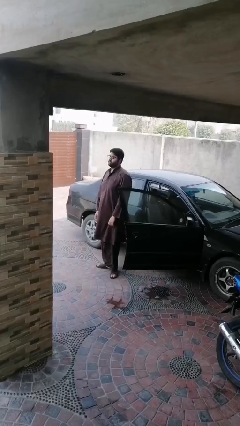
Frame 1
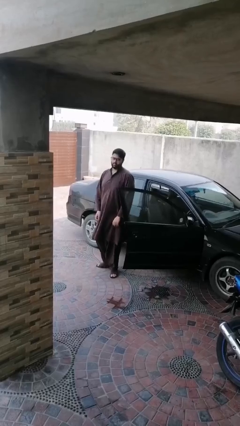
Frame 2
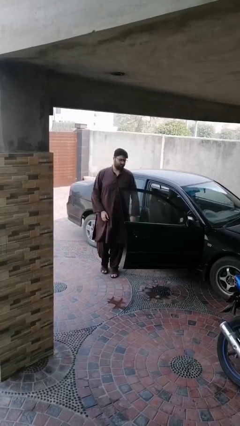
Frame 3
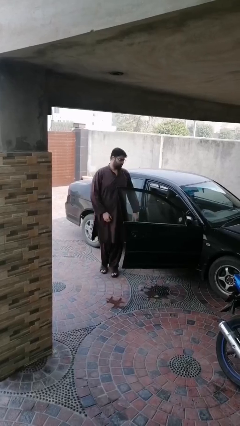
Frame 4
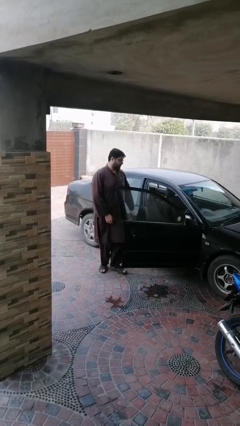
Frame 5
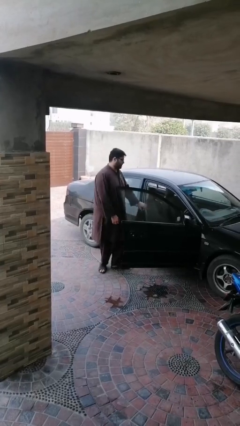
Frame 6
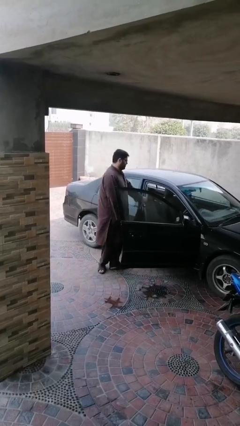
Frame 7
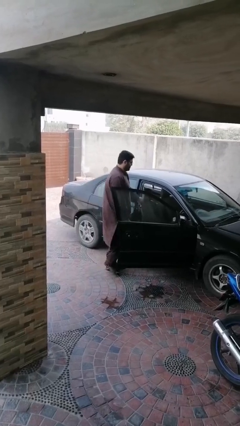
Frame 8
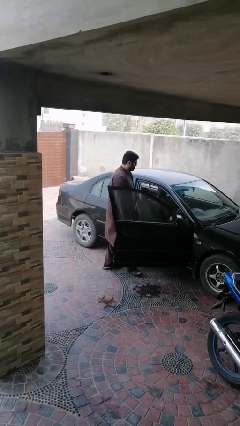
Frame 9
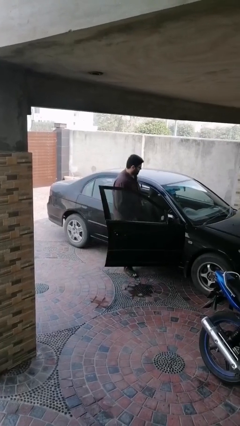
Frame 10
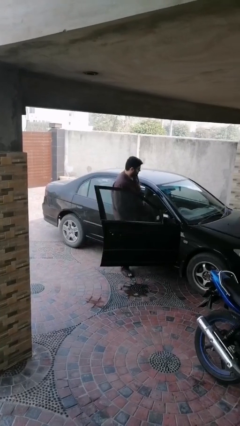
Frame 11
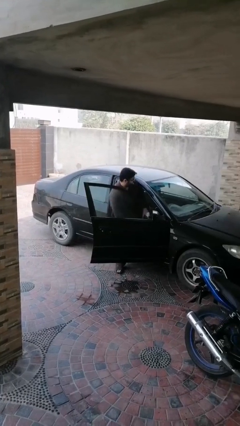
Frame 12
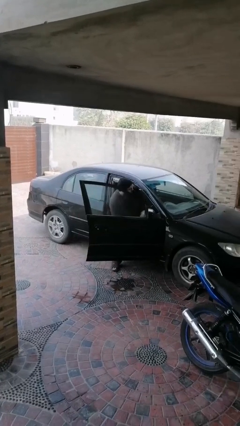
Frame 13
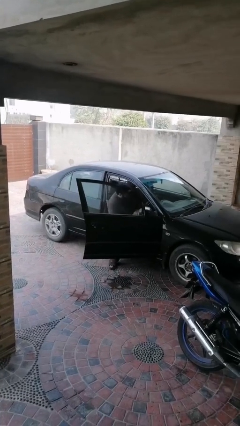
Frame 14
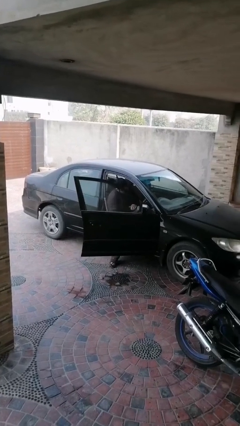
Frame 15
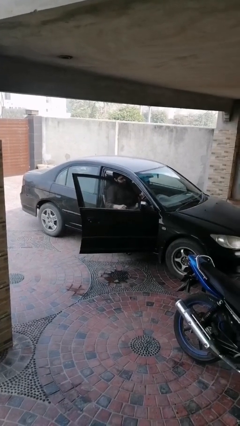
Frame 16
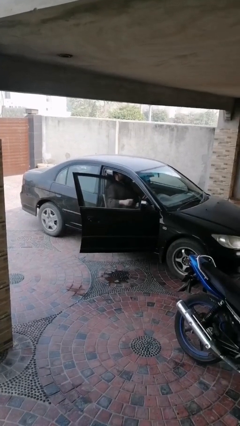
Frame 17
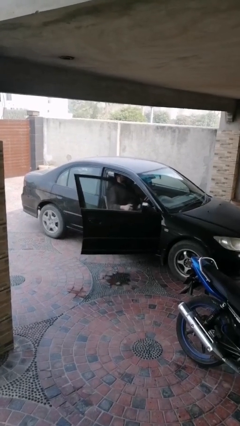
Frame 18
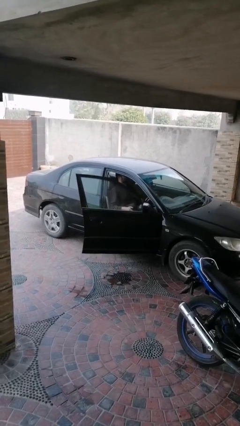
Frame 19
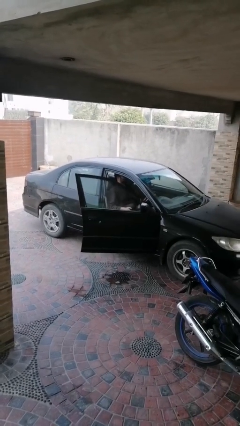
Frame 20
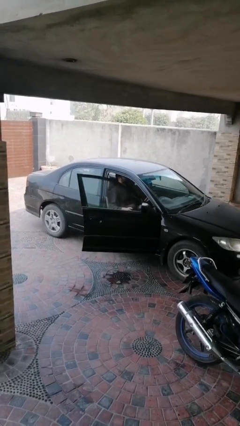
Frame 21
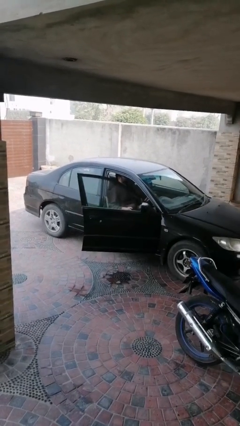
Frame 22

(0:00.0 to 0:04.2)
person enters car

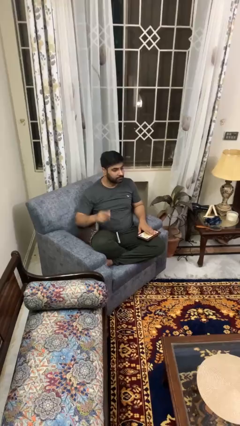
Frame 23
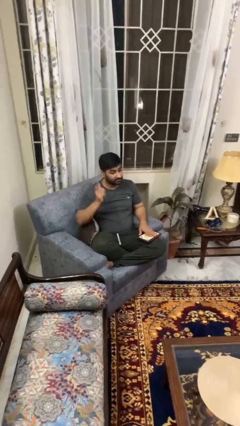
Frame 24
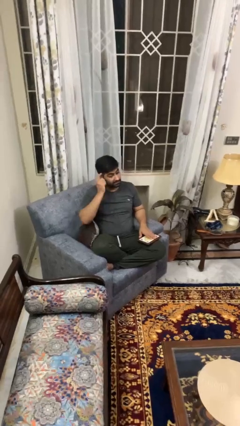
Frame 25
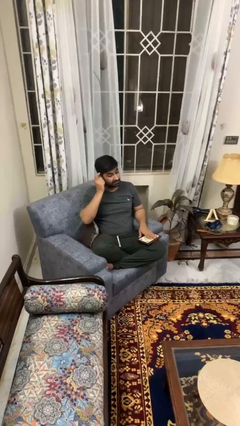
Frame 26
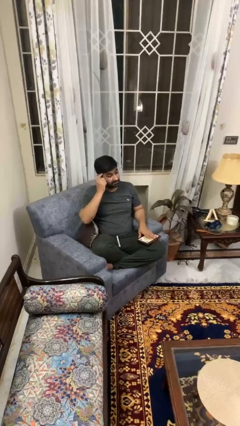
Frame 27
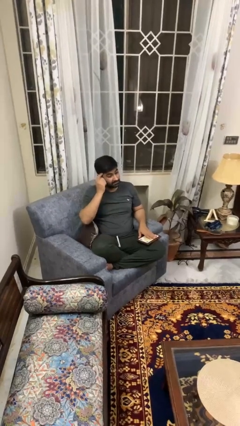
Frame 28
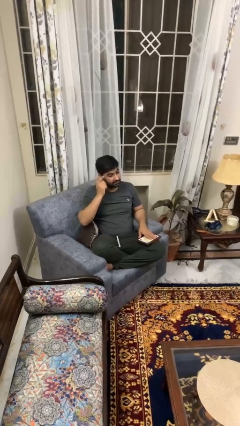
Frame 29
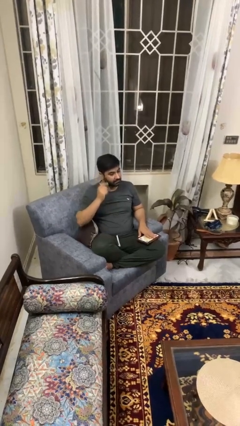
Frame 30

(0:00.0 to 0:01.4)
person pats head

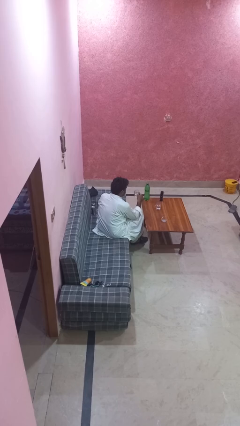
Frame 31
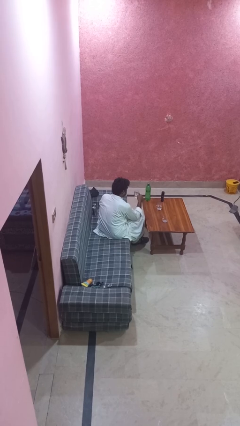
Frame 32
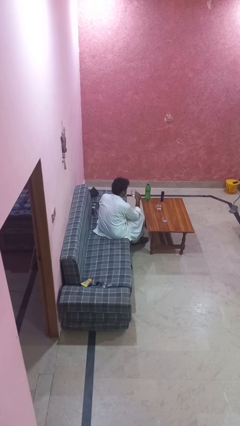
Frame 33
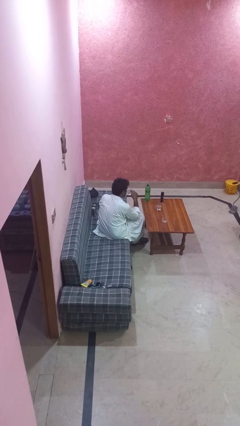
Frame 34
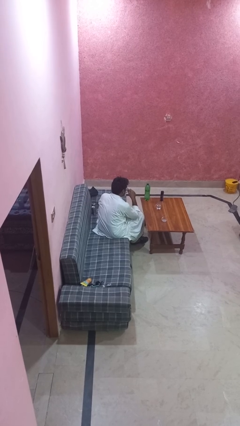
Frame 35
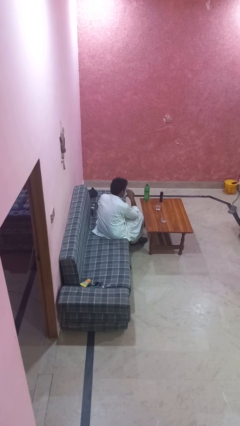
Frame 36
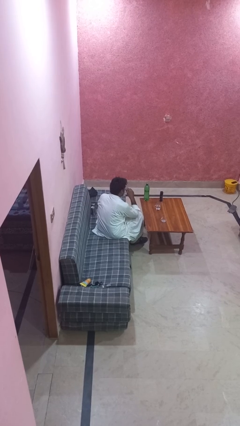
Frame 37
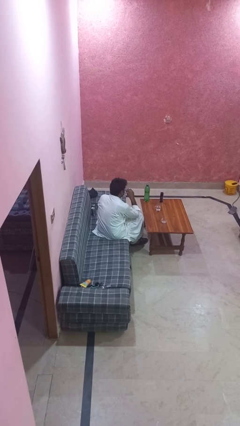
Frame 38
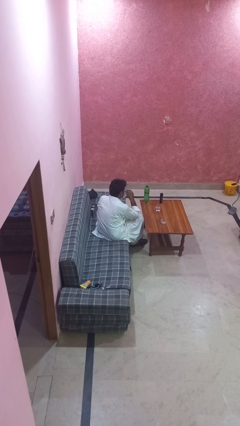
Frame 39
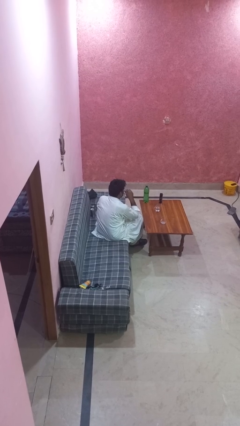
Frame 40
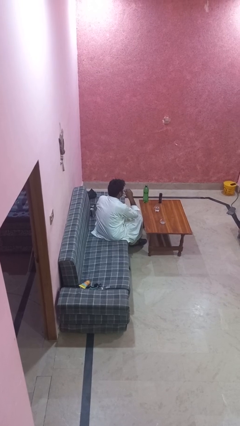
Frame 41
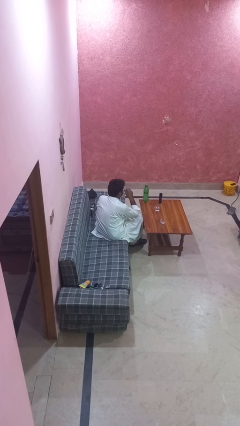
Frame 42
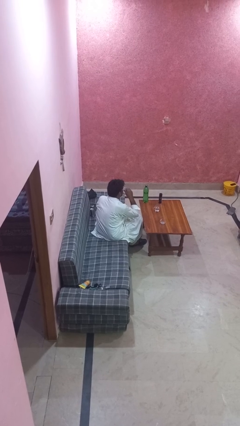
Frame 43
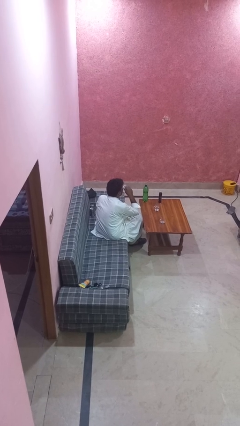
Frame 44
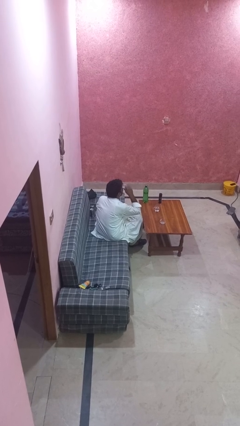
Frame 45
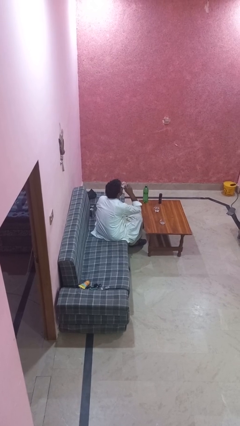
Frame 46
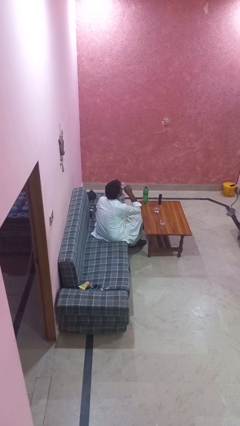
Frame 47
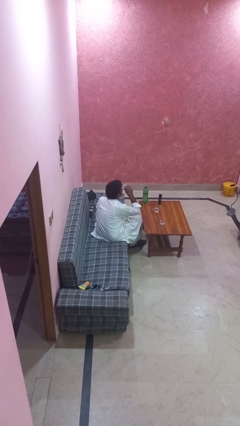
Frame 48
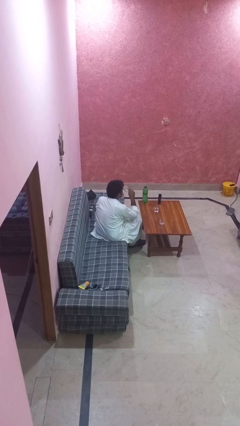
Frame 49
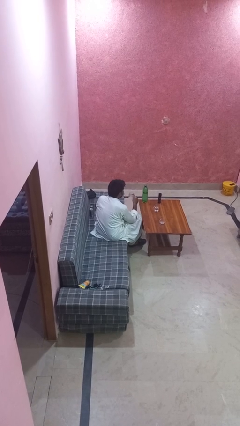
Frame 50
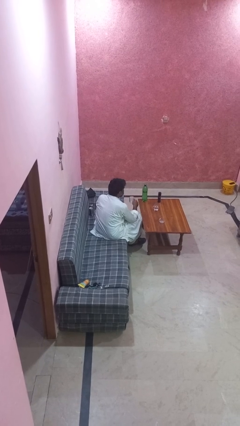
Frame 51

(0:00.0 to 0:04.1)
person drinks from shotglass

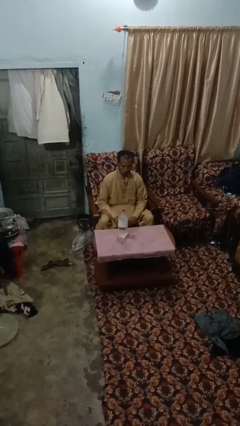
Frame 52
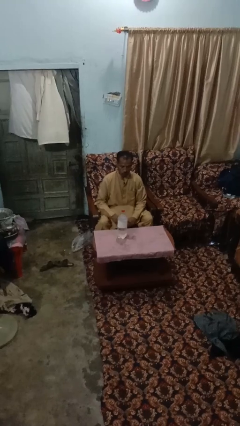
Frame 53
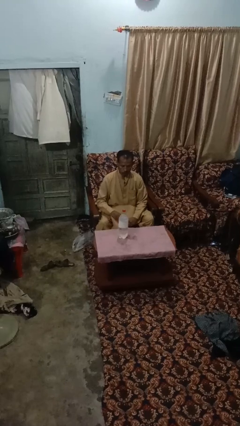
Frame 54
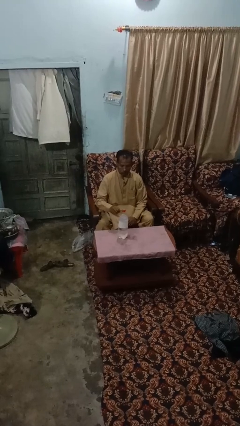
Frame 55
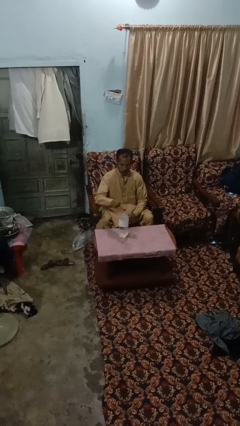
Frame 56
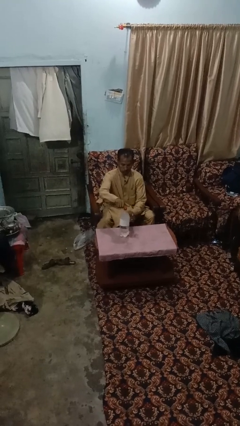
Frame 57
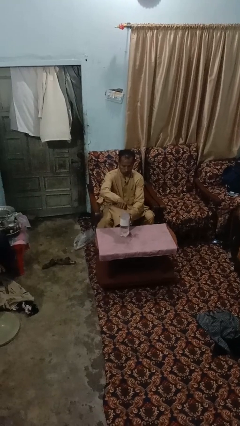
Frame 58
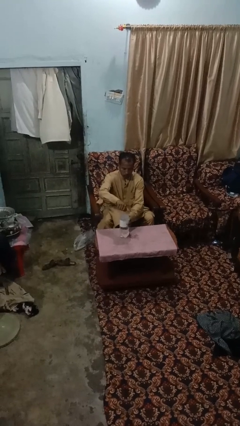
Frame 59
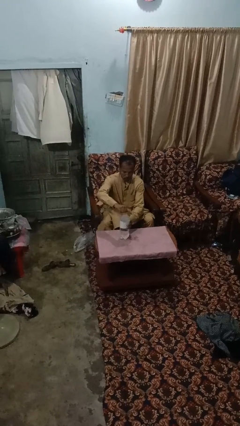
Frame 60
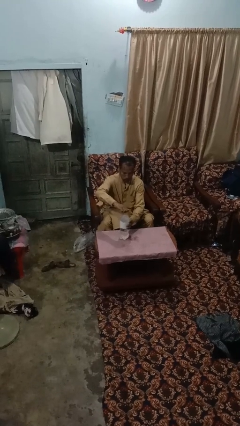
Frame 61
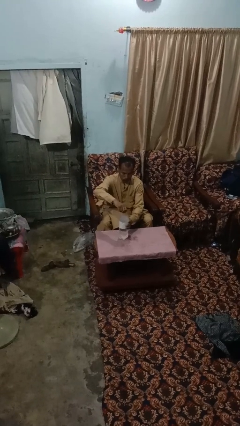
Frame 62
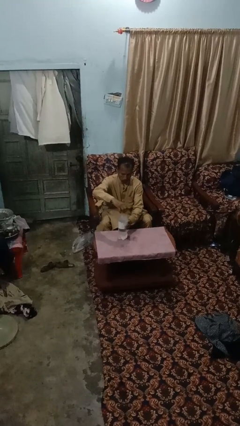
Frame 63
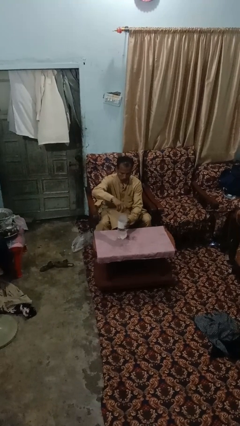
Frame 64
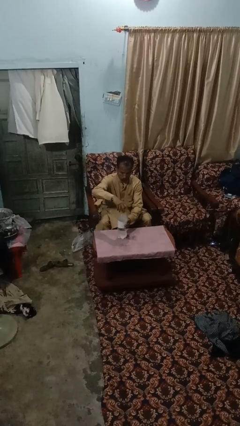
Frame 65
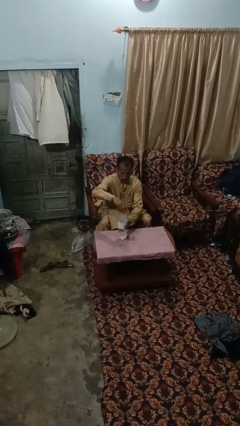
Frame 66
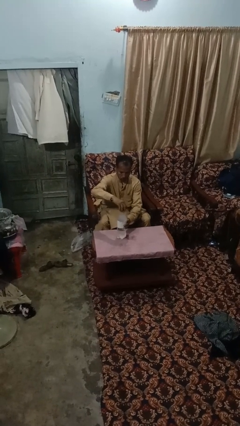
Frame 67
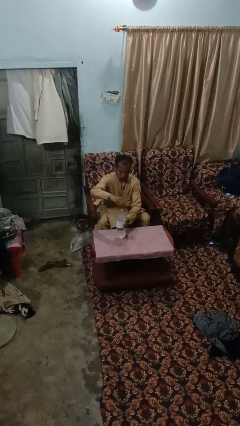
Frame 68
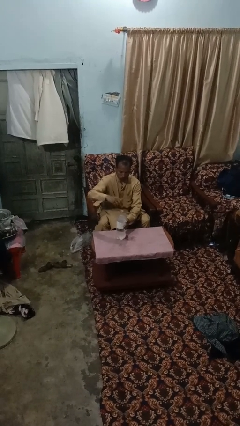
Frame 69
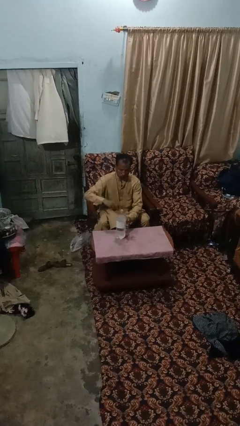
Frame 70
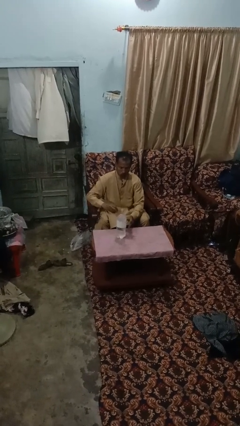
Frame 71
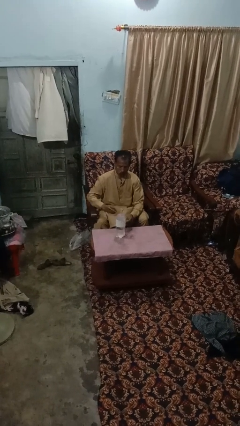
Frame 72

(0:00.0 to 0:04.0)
person unscrews lid from bottle

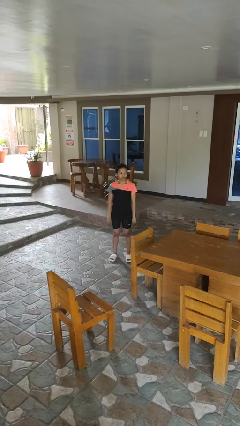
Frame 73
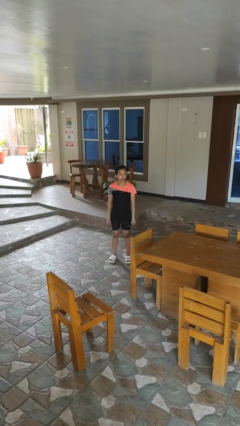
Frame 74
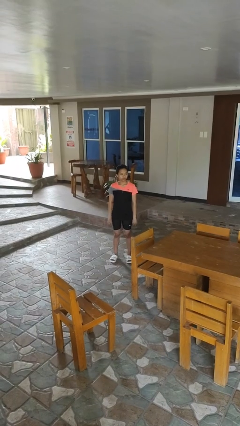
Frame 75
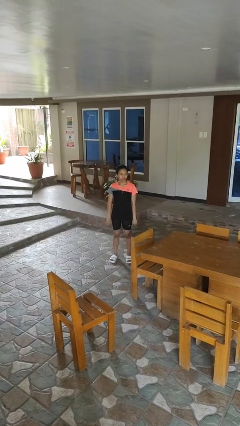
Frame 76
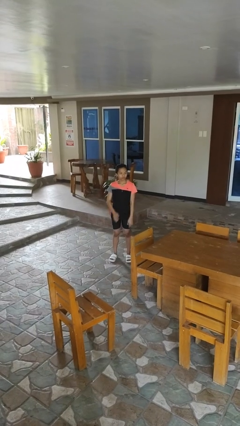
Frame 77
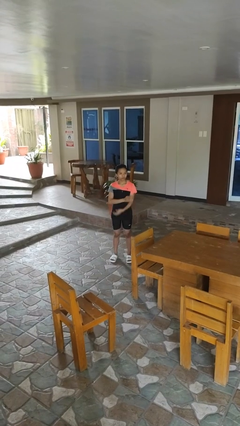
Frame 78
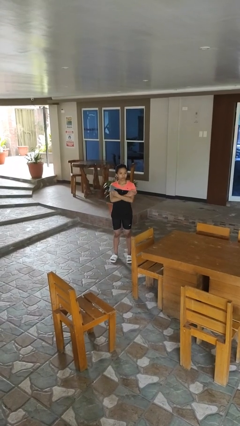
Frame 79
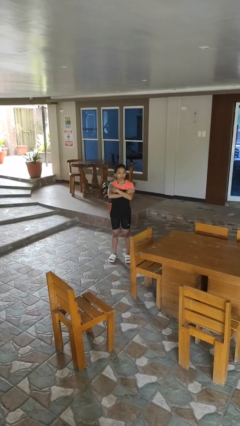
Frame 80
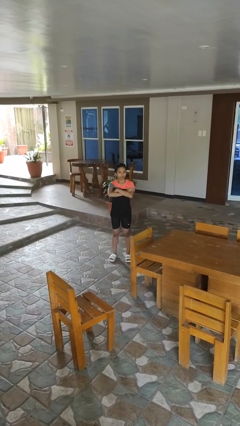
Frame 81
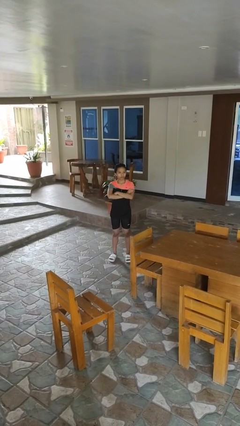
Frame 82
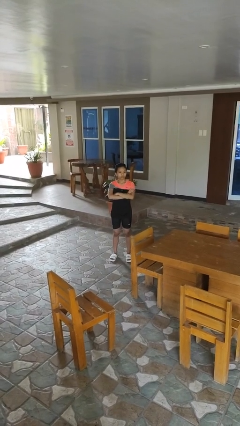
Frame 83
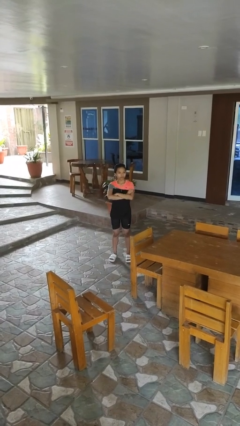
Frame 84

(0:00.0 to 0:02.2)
person crosses arms

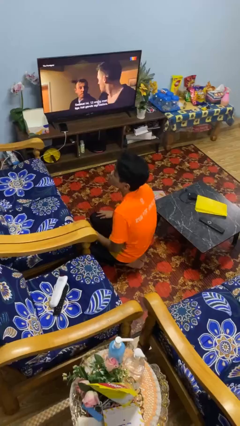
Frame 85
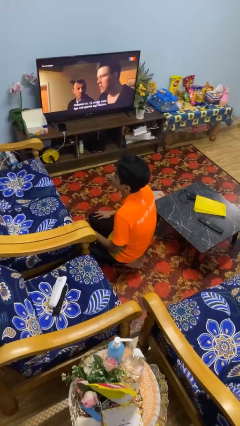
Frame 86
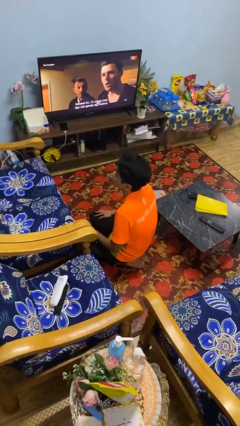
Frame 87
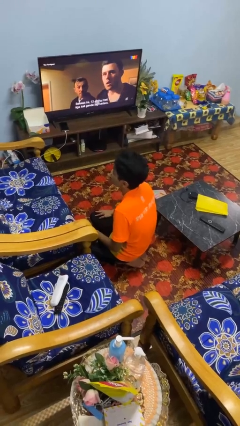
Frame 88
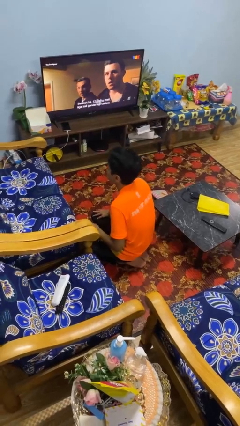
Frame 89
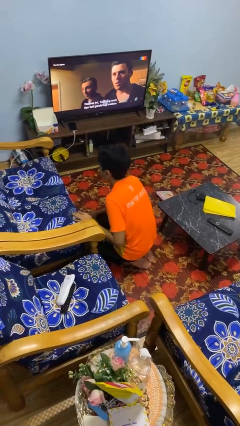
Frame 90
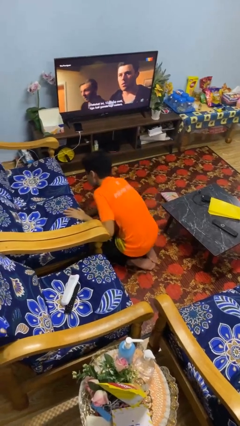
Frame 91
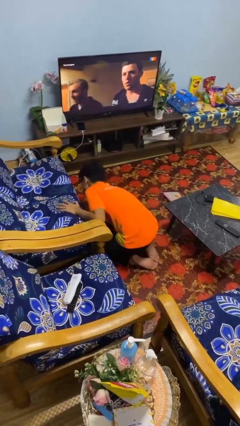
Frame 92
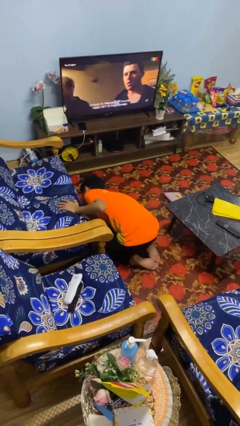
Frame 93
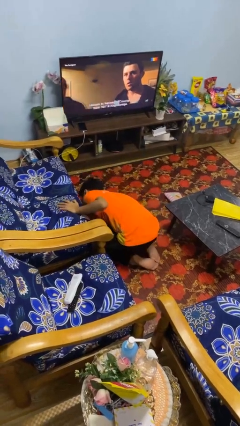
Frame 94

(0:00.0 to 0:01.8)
person searches under couch
